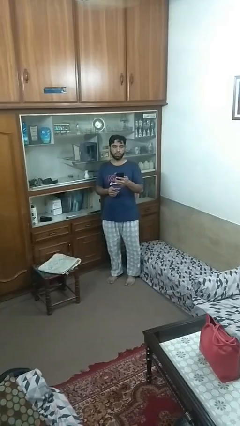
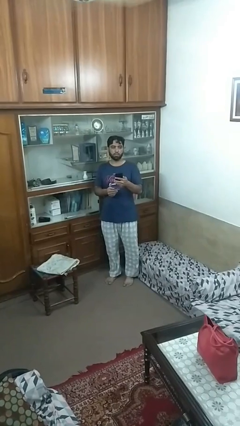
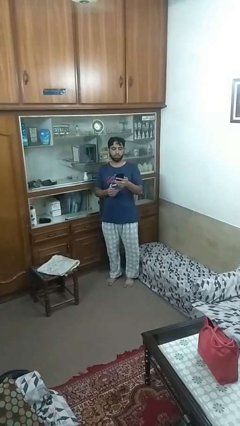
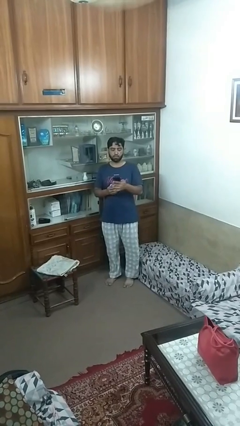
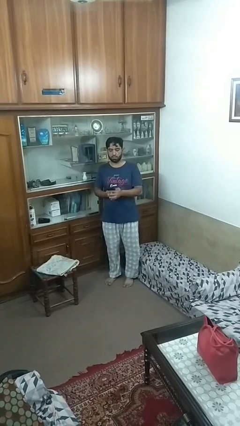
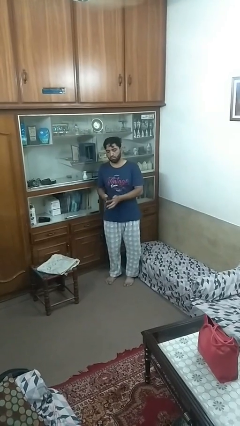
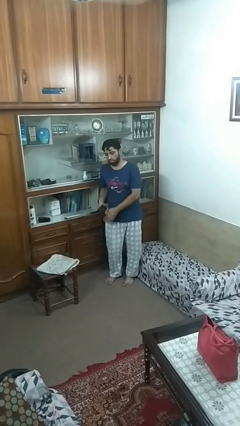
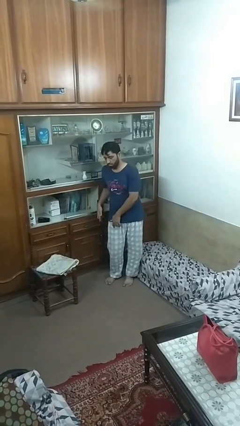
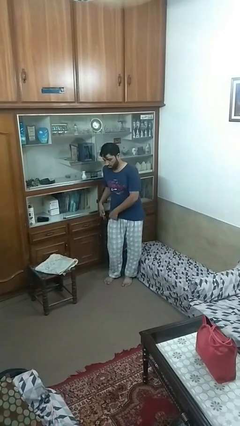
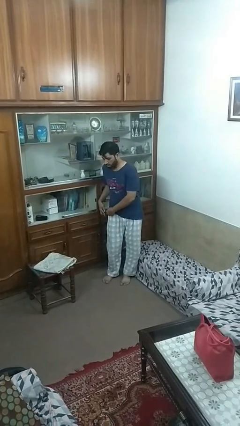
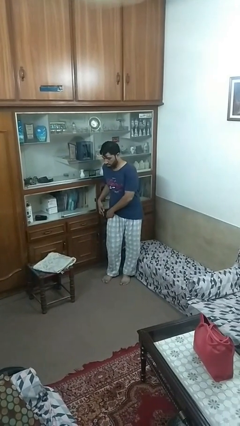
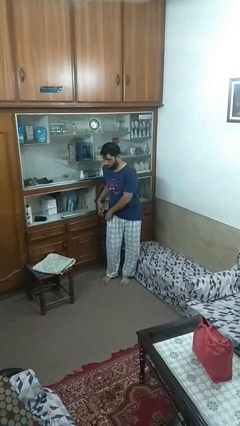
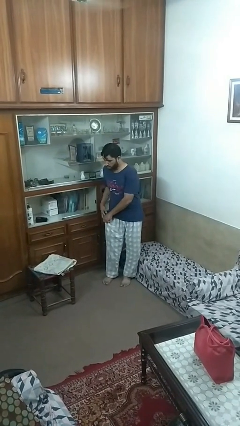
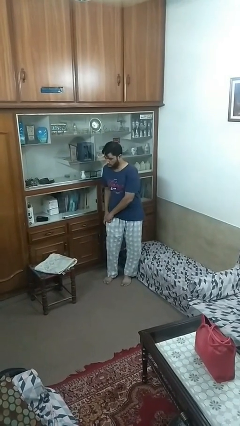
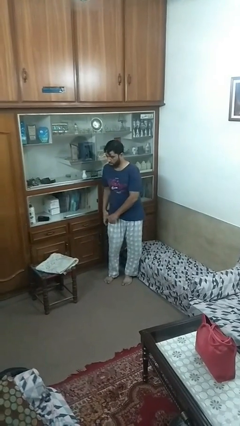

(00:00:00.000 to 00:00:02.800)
person puts phone into pocket

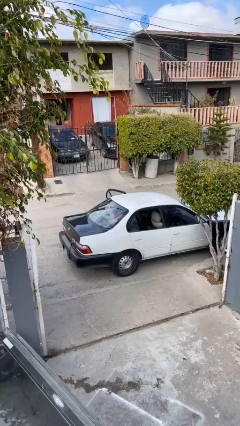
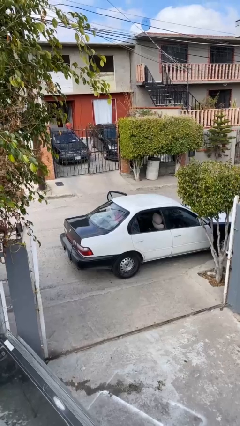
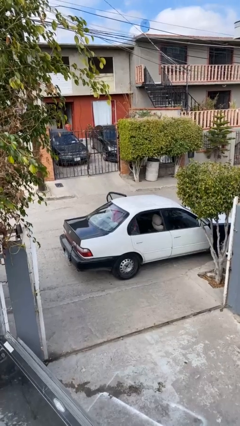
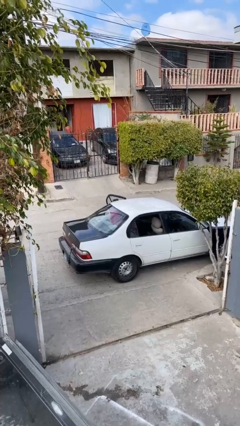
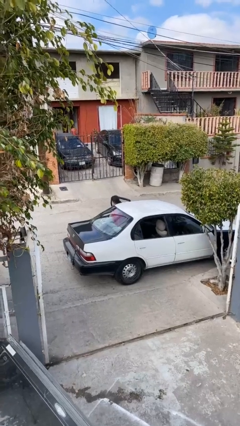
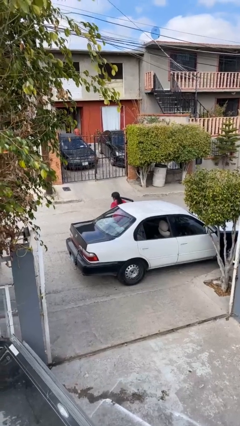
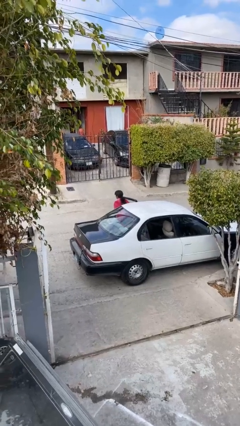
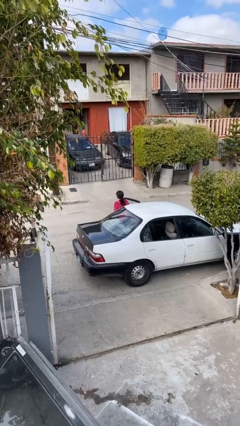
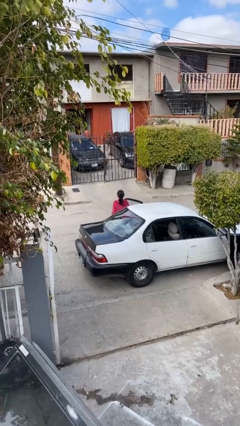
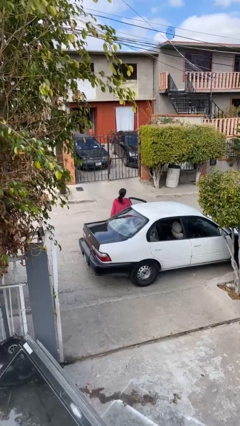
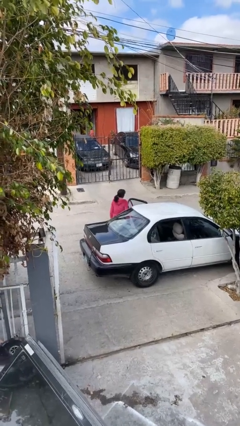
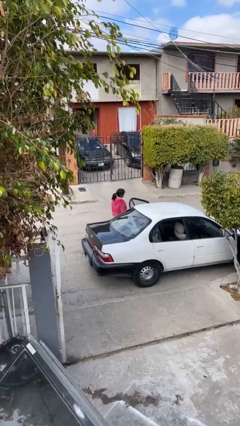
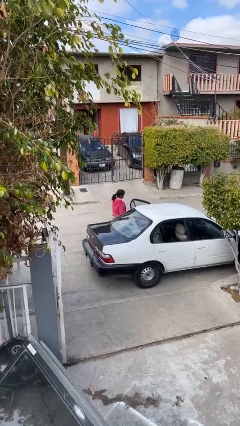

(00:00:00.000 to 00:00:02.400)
person exits car

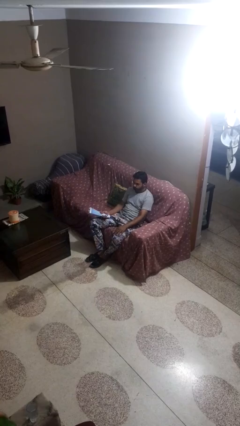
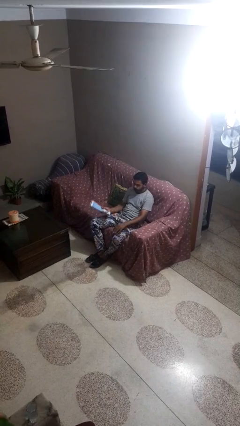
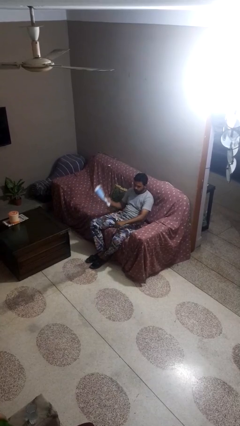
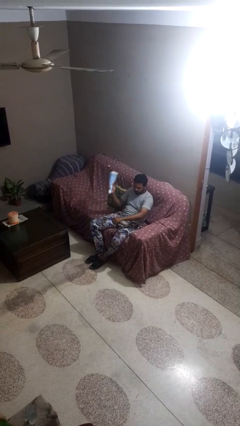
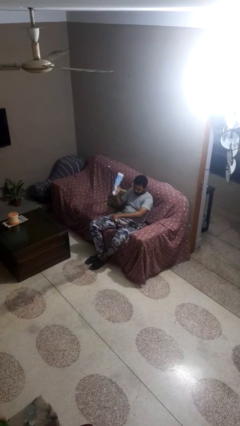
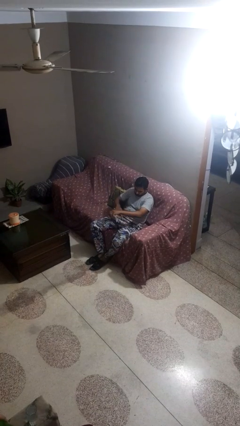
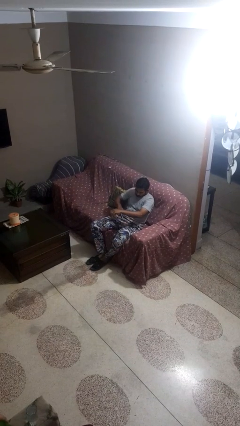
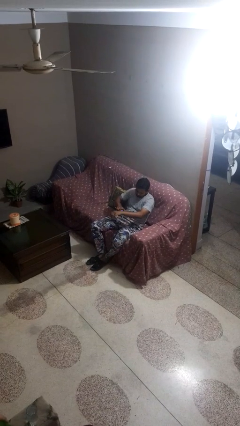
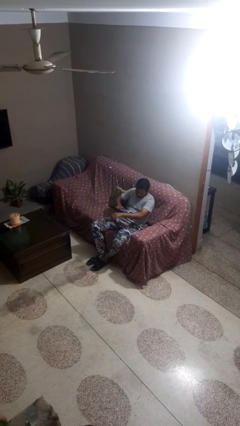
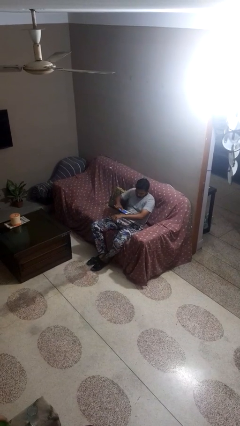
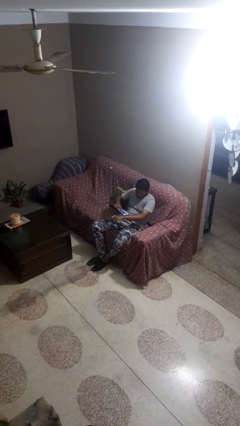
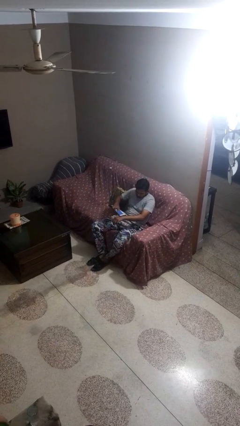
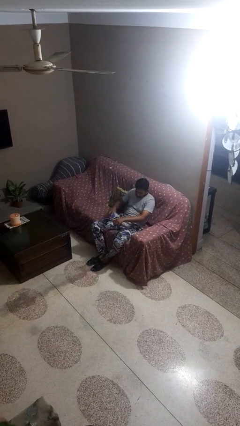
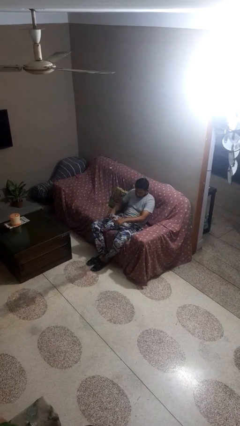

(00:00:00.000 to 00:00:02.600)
person swats bug

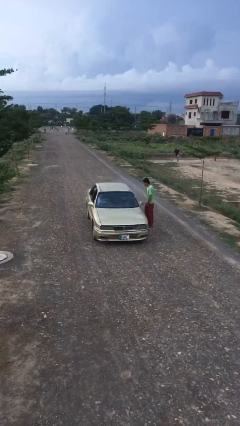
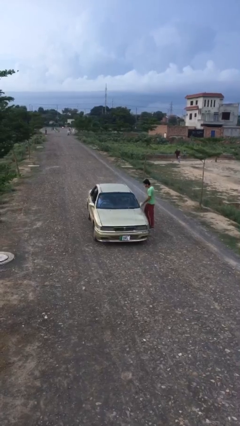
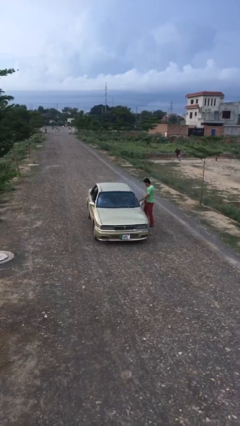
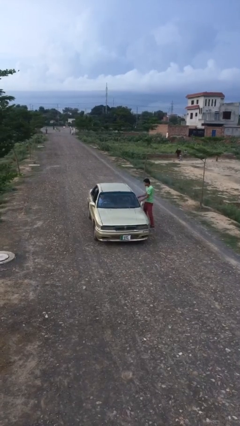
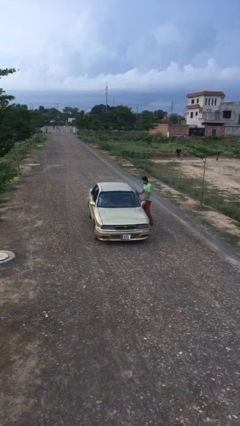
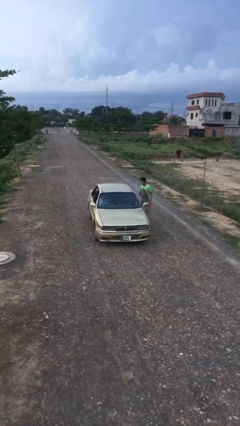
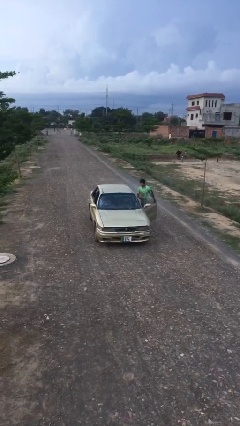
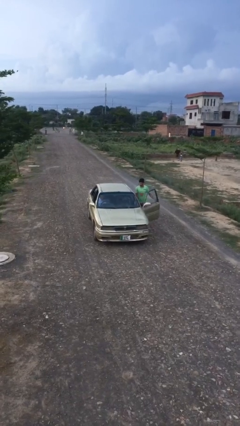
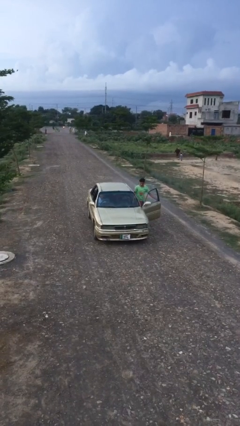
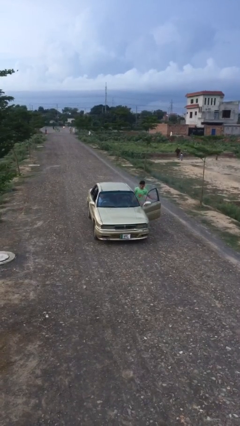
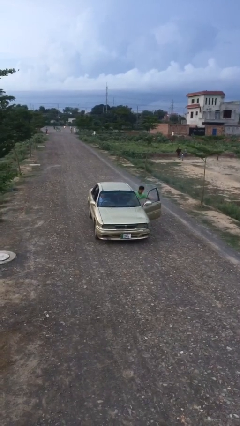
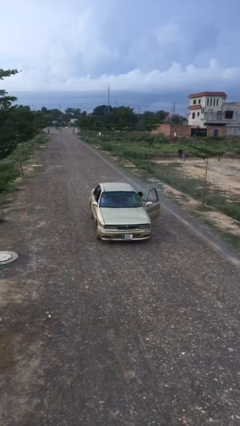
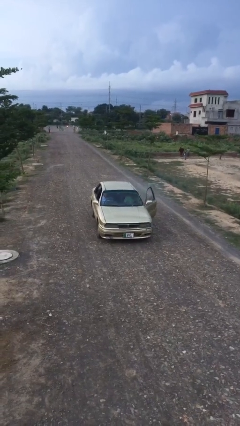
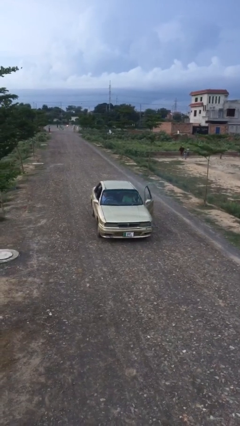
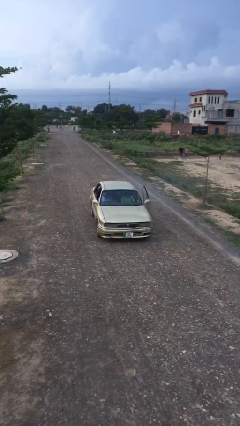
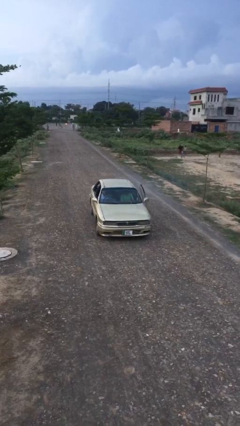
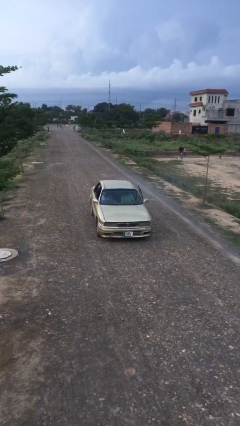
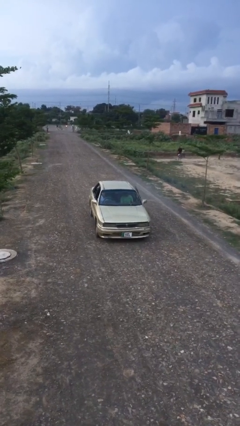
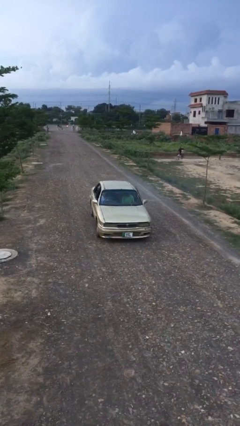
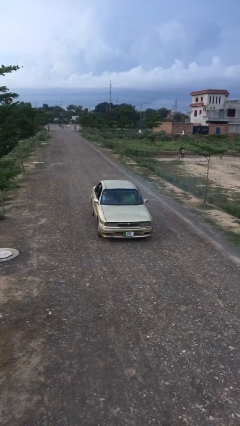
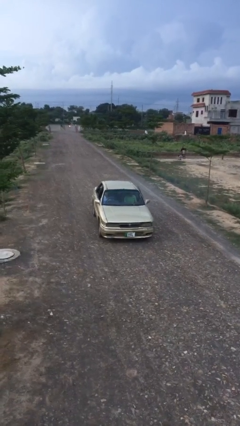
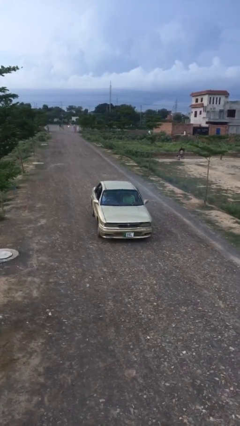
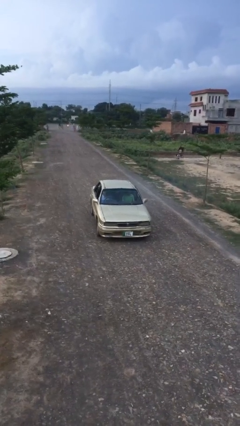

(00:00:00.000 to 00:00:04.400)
car picks up person

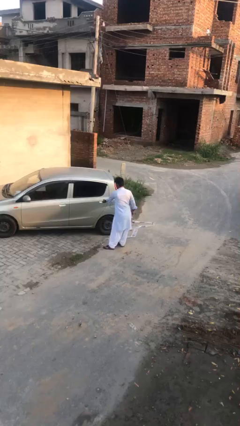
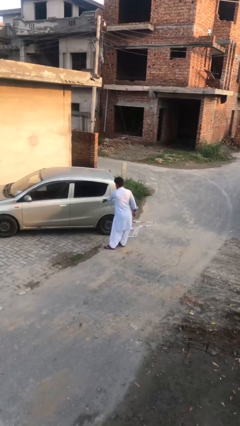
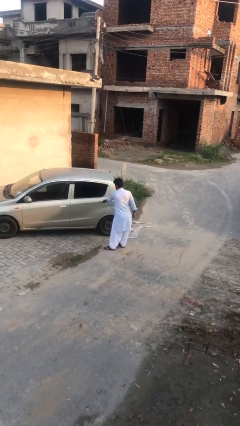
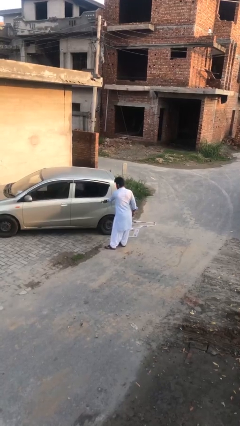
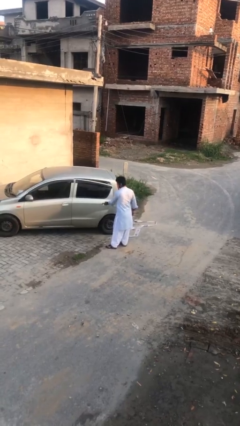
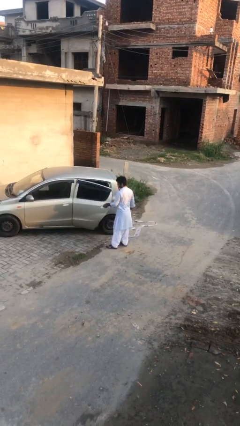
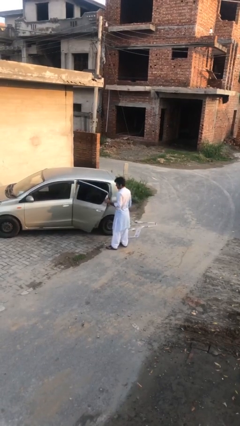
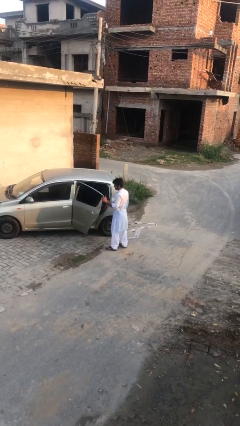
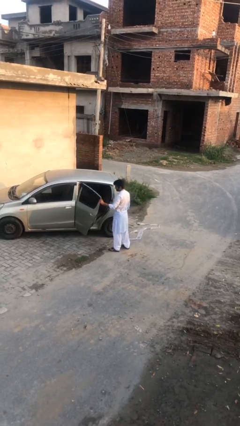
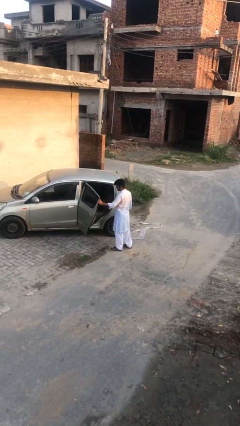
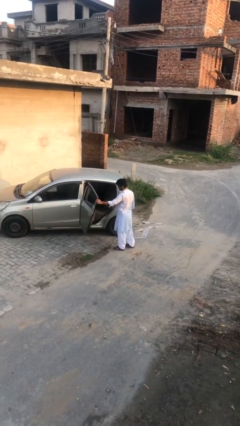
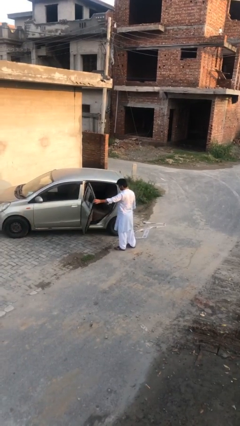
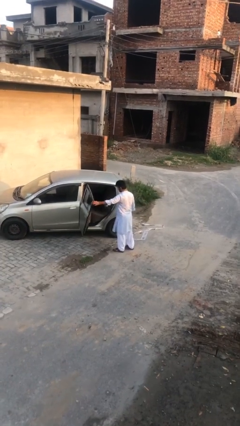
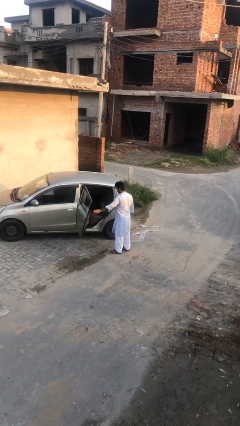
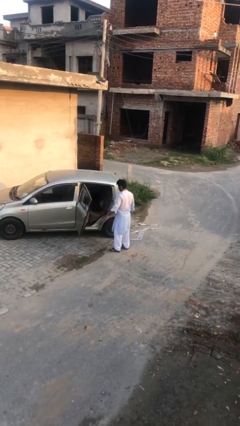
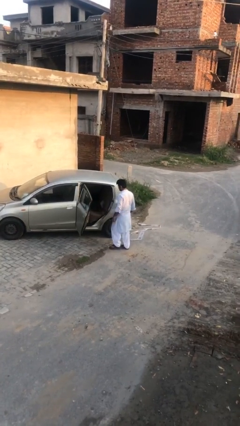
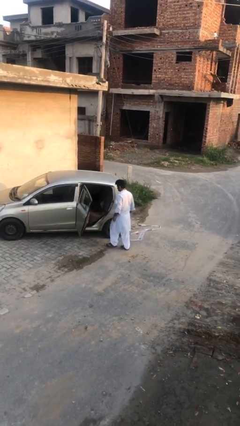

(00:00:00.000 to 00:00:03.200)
person opens car door

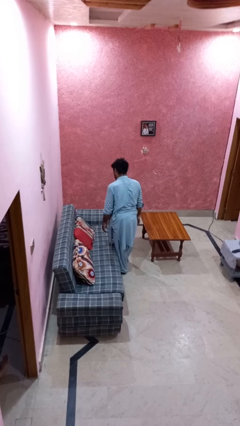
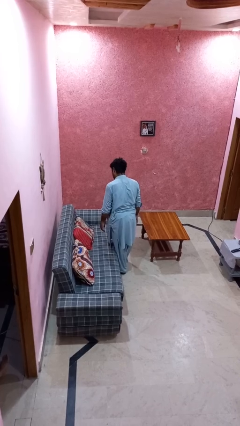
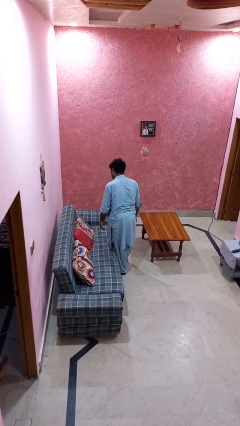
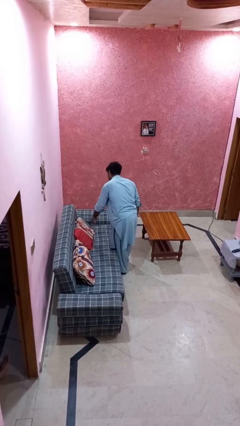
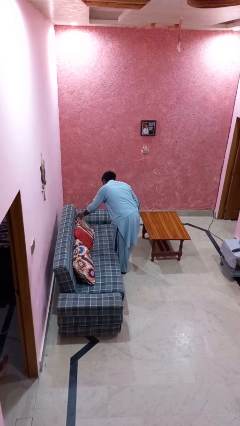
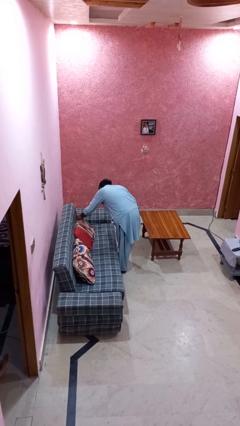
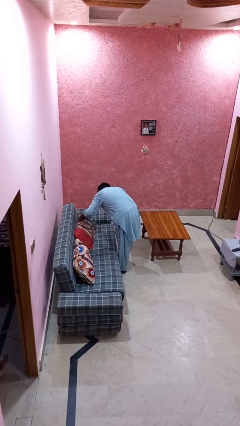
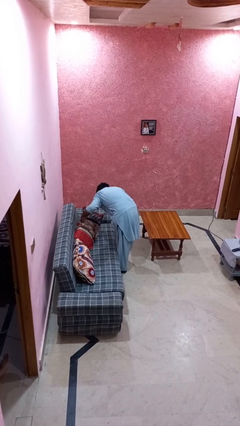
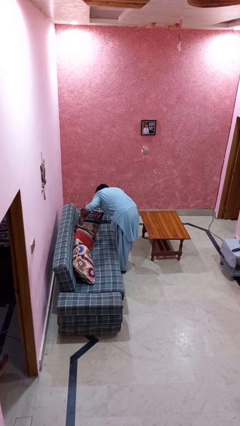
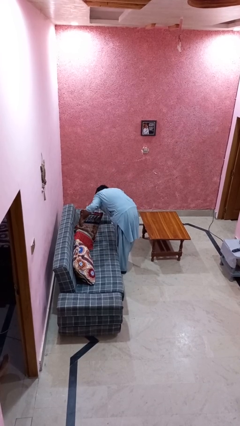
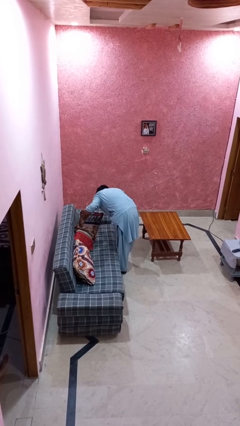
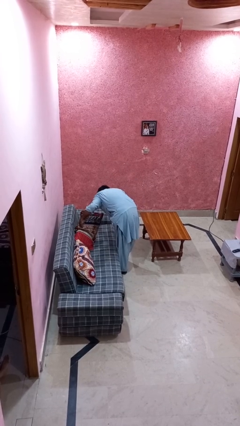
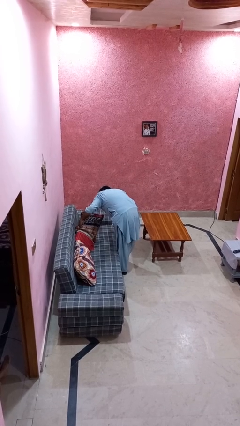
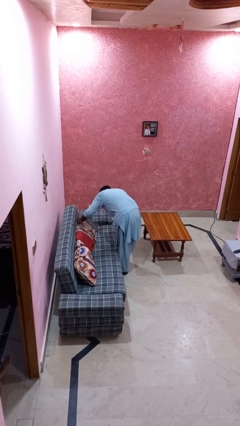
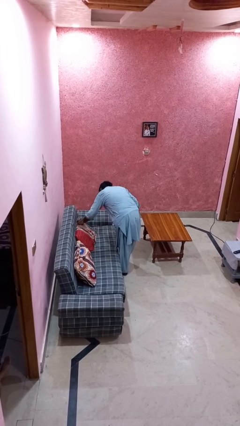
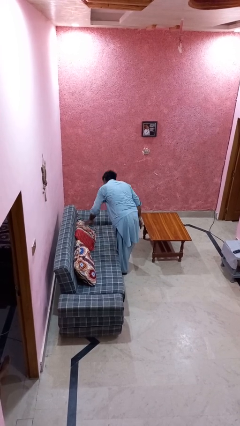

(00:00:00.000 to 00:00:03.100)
person searches in couch
